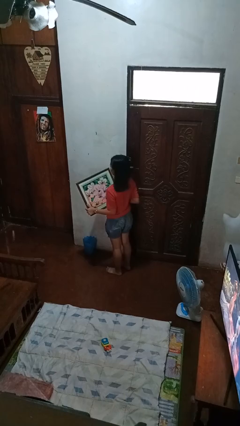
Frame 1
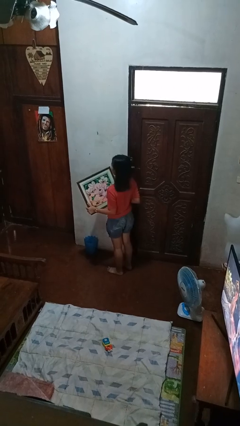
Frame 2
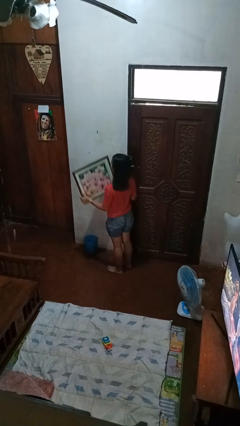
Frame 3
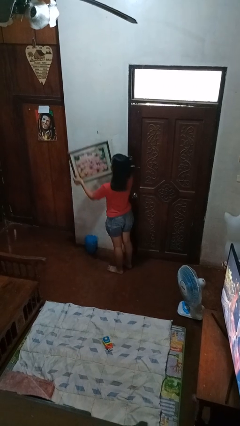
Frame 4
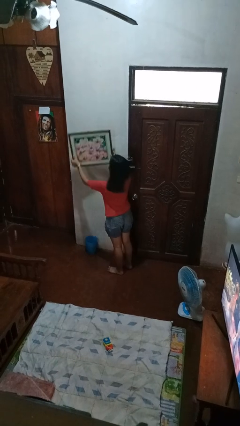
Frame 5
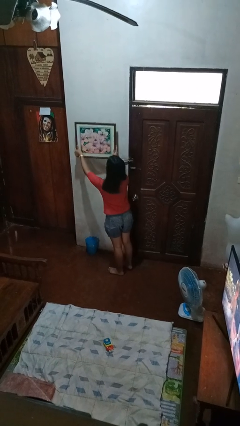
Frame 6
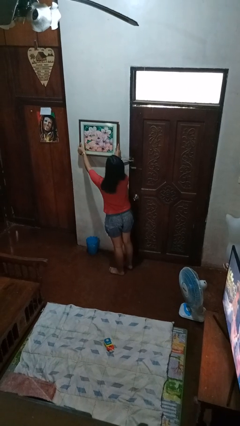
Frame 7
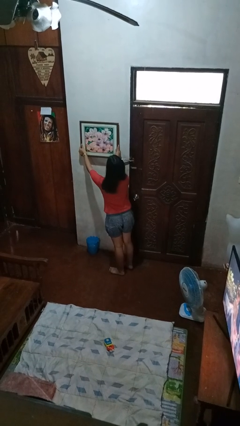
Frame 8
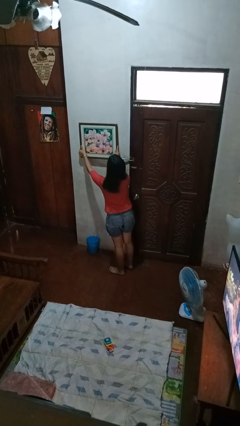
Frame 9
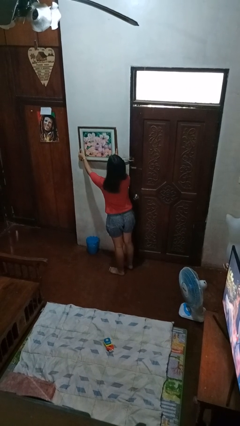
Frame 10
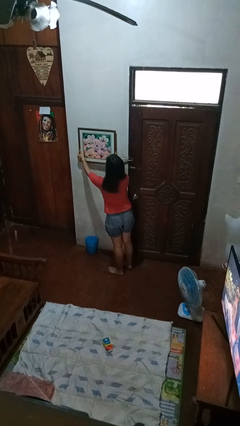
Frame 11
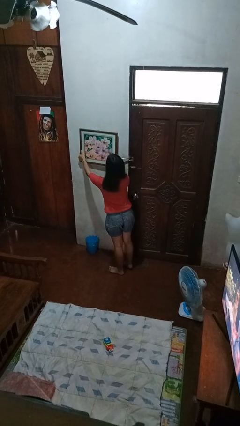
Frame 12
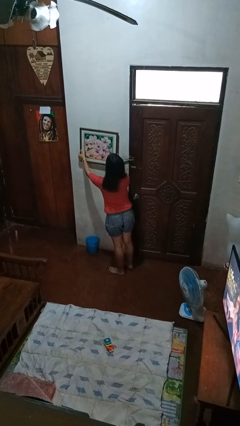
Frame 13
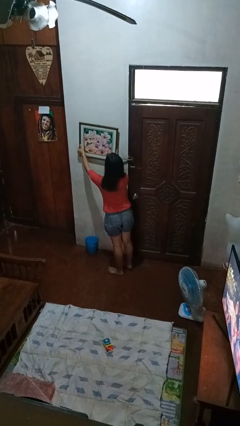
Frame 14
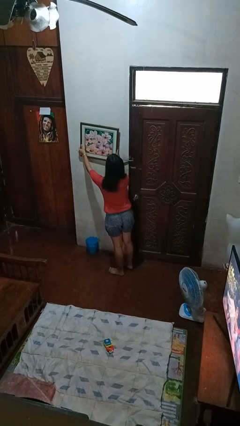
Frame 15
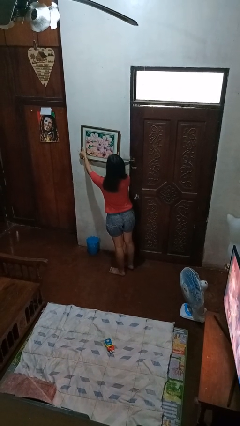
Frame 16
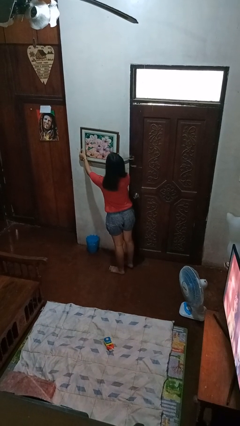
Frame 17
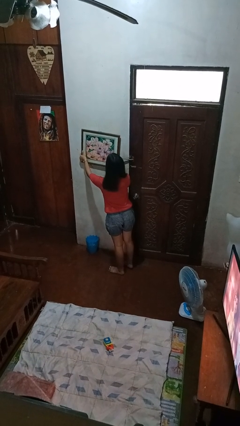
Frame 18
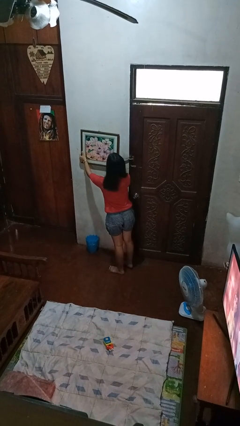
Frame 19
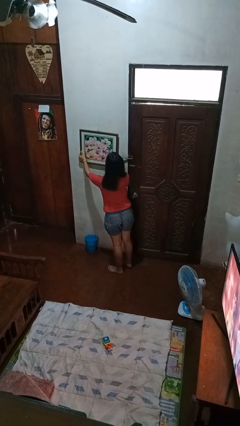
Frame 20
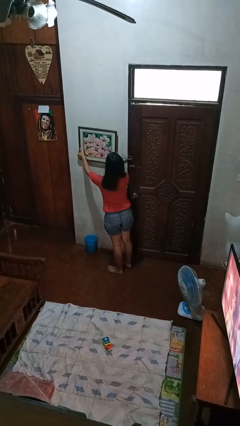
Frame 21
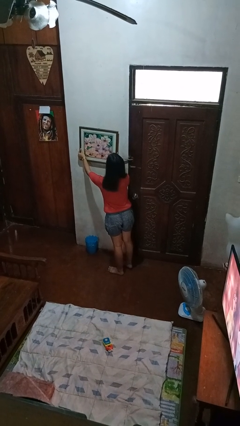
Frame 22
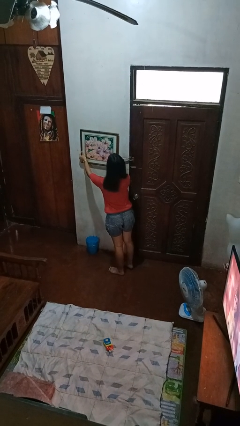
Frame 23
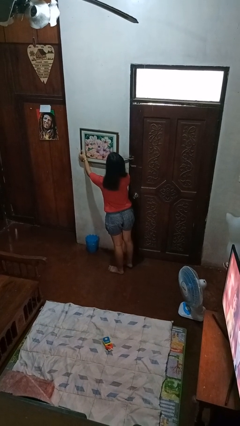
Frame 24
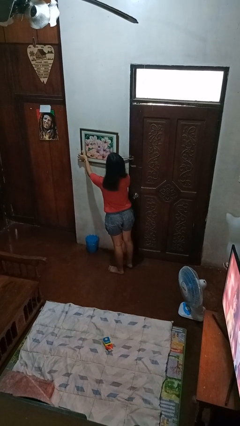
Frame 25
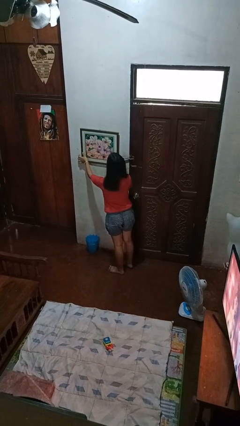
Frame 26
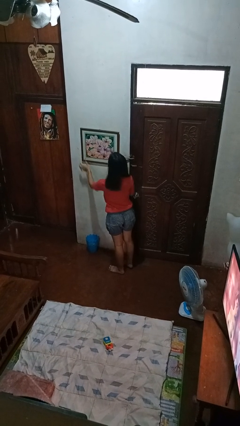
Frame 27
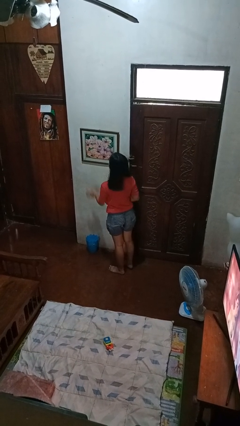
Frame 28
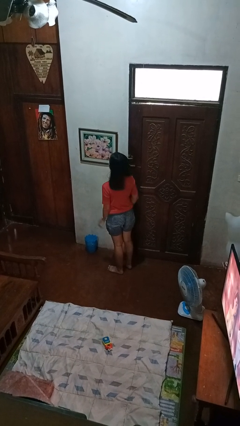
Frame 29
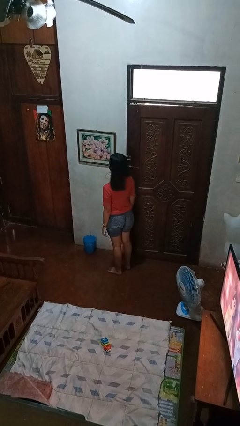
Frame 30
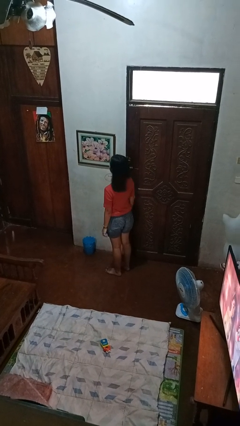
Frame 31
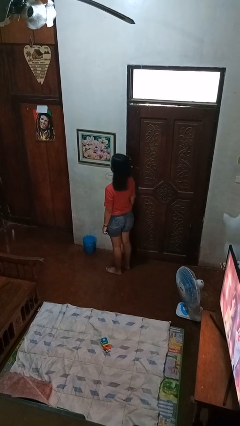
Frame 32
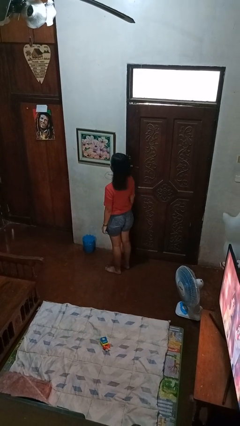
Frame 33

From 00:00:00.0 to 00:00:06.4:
person puts up picture frame

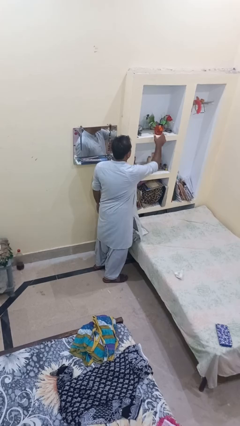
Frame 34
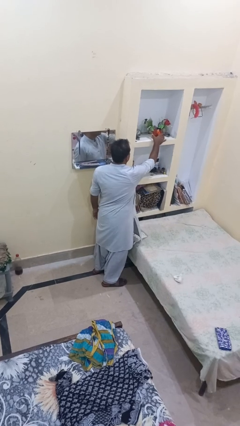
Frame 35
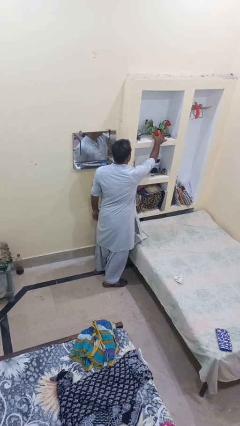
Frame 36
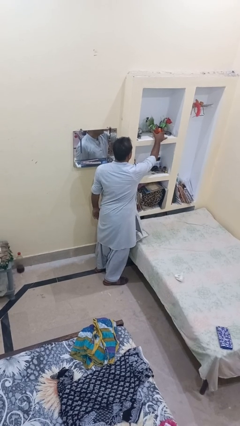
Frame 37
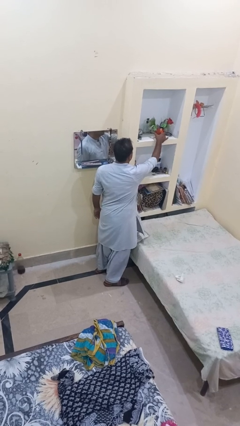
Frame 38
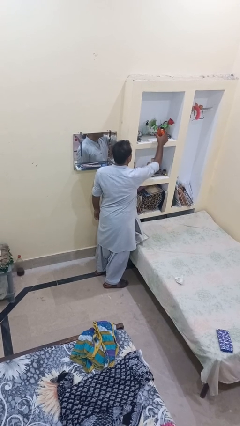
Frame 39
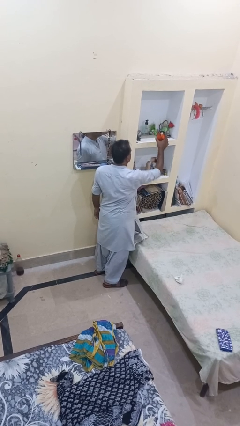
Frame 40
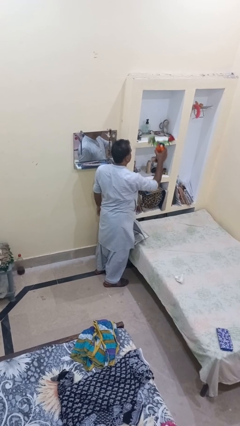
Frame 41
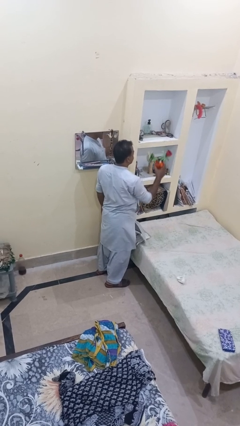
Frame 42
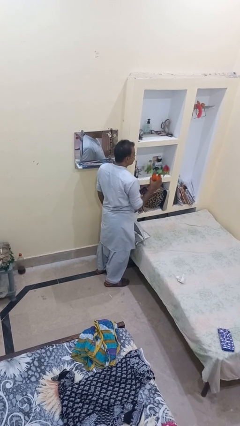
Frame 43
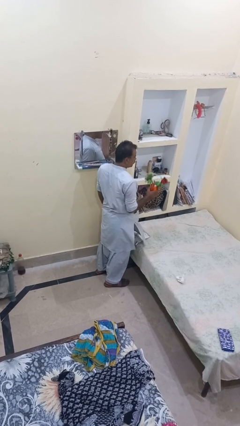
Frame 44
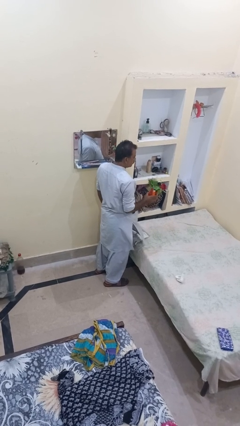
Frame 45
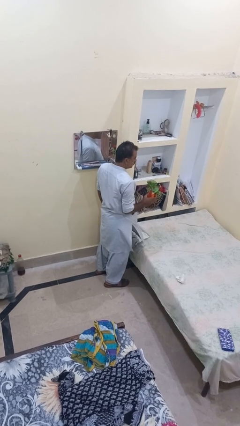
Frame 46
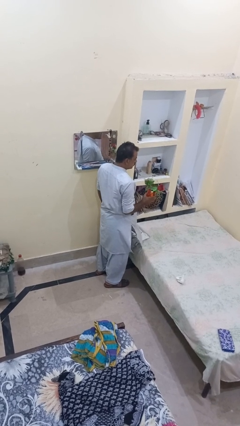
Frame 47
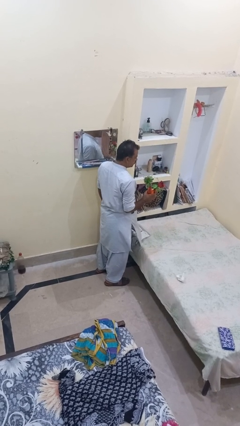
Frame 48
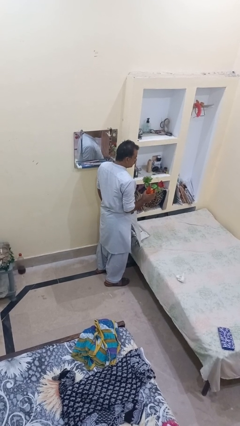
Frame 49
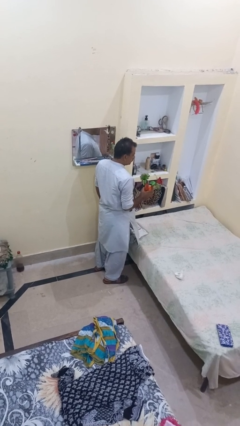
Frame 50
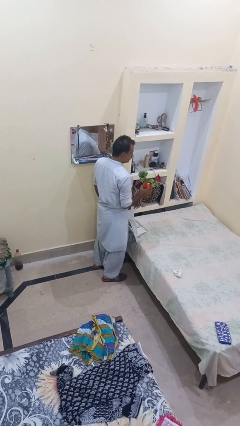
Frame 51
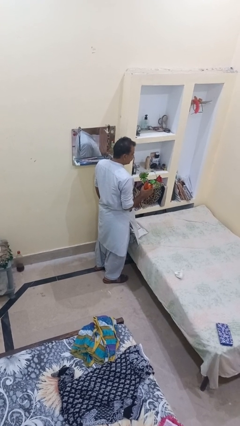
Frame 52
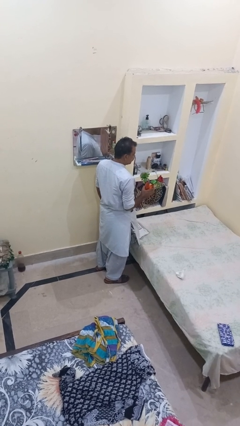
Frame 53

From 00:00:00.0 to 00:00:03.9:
person picks up object from shelf

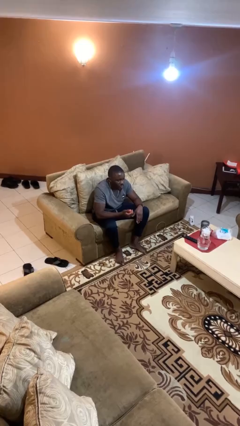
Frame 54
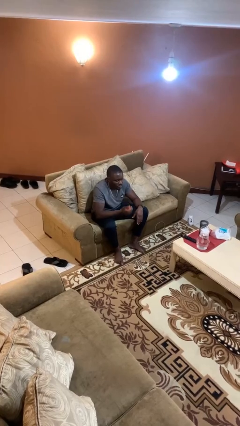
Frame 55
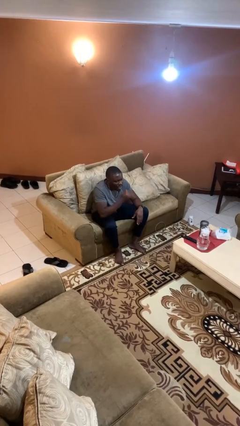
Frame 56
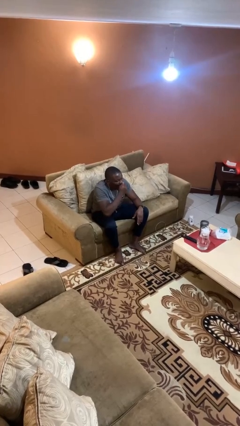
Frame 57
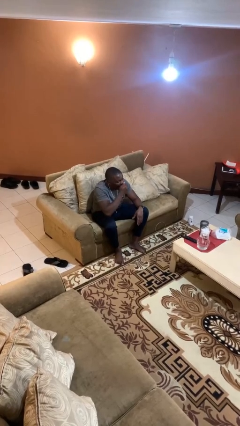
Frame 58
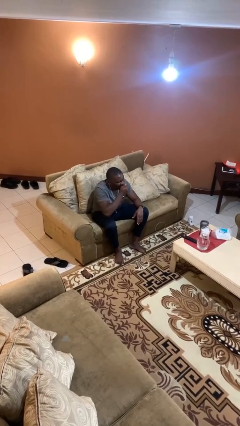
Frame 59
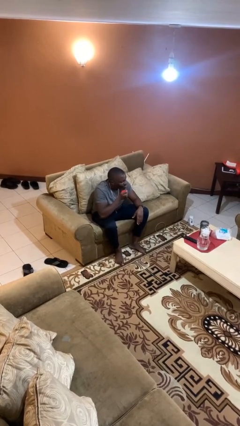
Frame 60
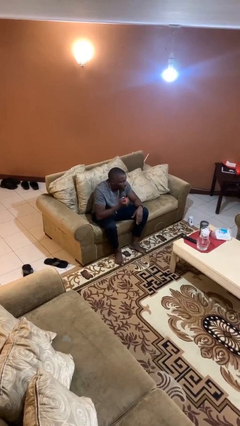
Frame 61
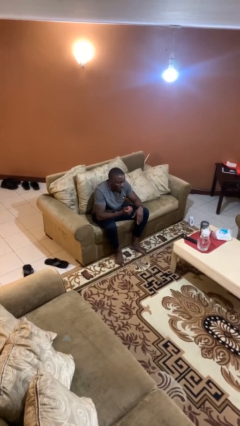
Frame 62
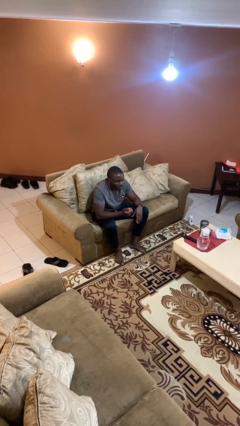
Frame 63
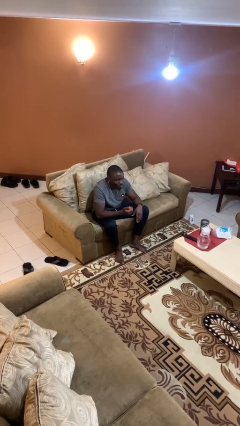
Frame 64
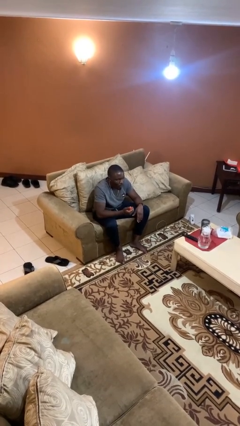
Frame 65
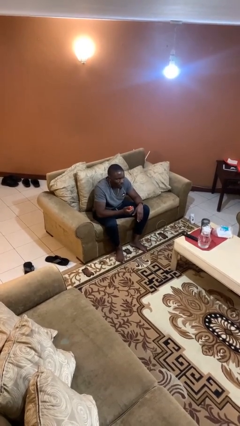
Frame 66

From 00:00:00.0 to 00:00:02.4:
person eats apple

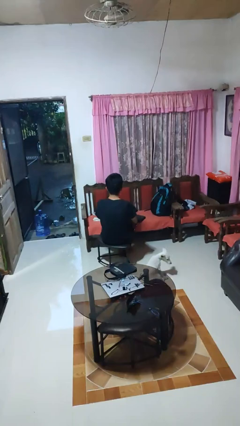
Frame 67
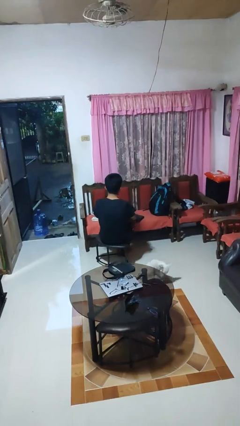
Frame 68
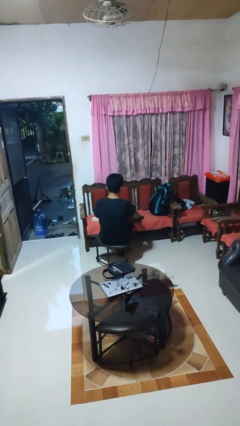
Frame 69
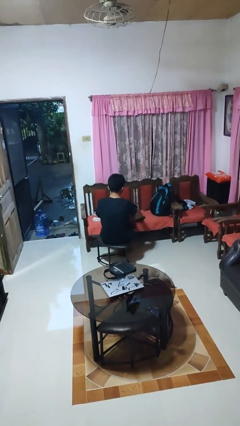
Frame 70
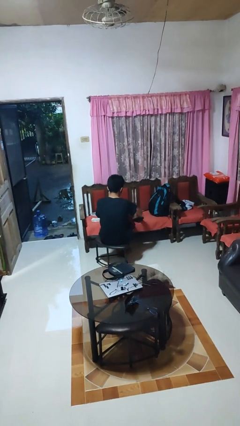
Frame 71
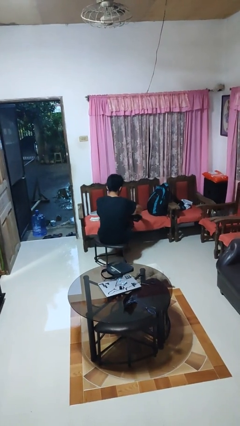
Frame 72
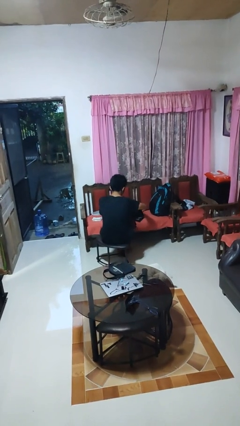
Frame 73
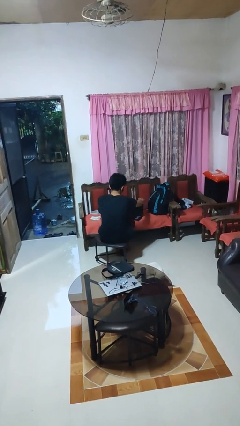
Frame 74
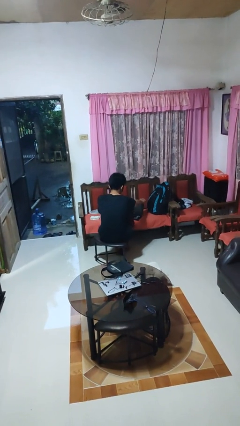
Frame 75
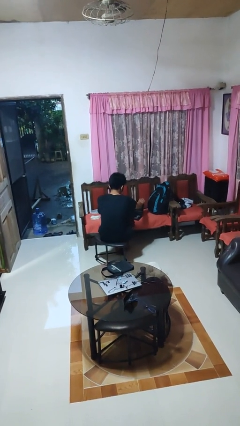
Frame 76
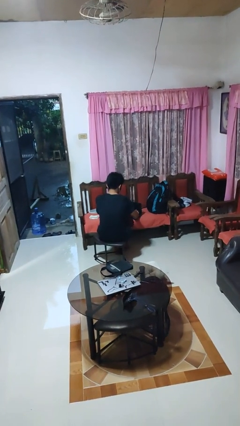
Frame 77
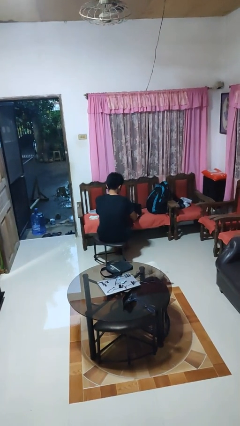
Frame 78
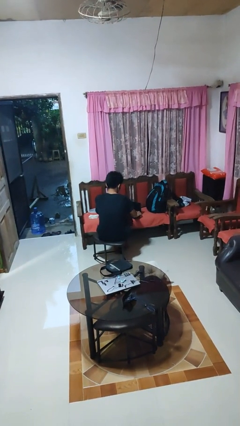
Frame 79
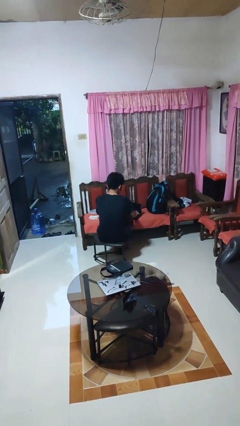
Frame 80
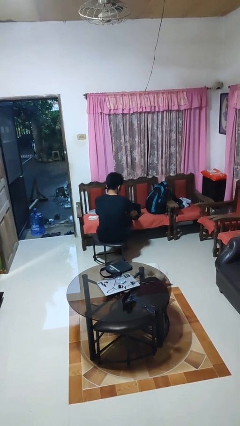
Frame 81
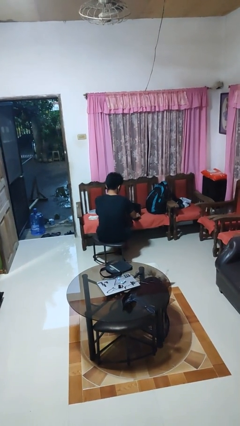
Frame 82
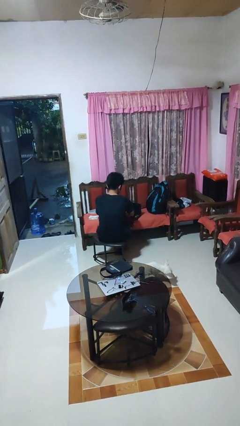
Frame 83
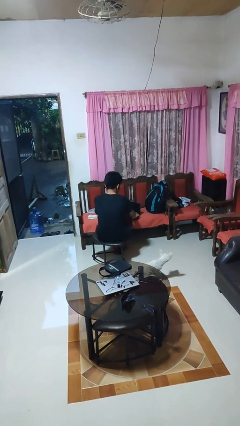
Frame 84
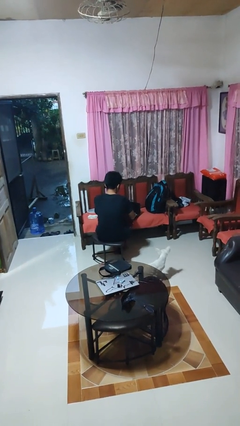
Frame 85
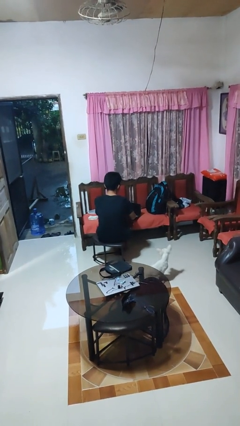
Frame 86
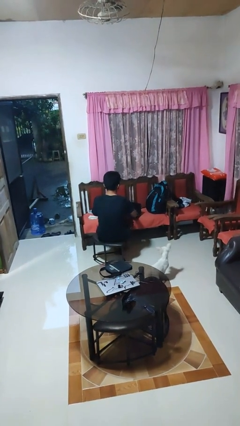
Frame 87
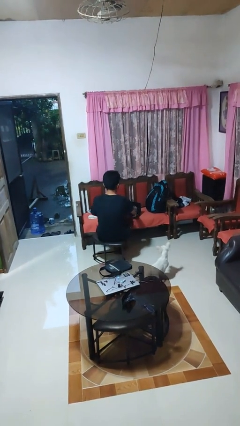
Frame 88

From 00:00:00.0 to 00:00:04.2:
person opens laptop

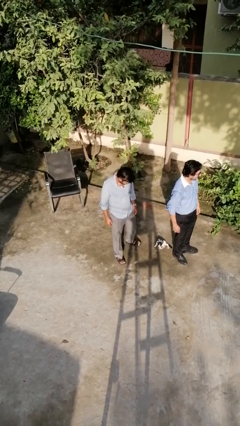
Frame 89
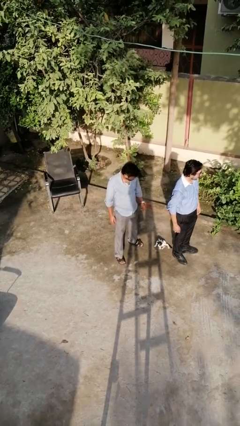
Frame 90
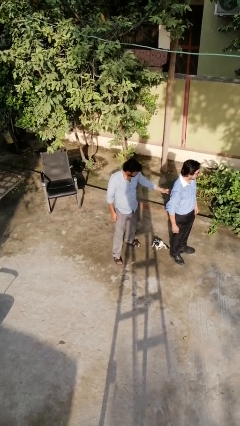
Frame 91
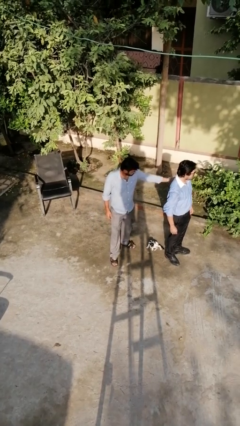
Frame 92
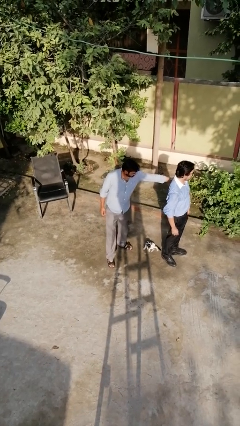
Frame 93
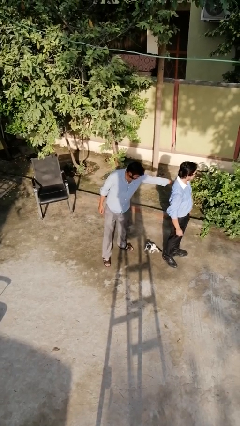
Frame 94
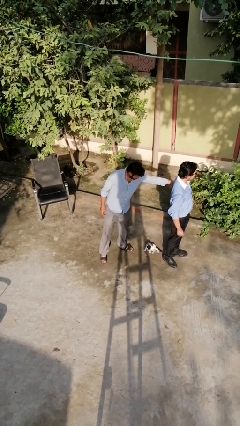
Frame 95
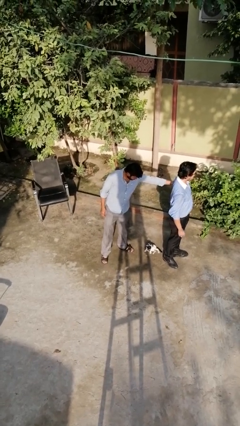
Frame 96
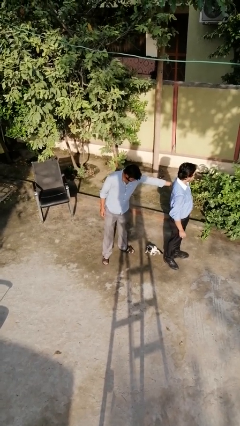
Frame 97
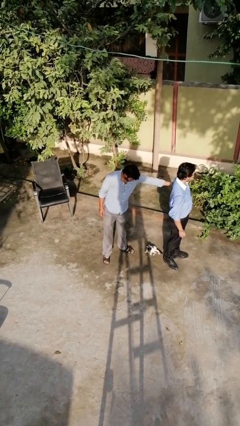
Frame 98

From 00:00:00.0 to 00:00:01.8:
person grabs person by bicep
